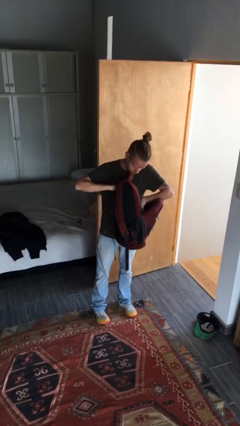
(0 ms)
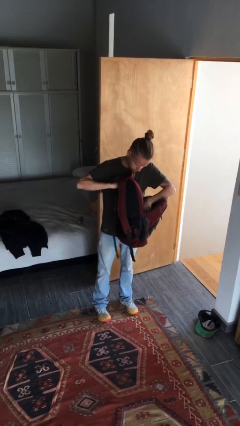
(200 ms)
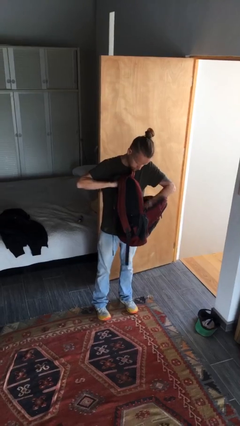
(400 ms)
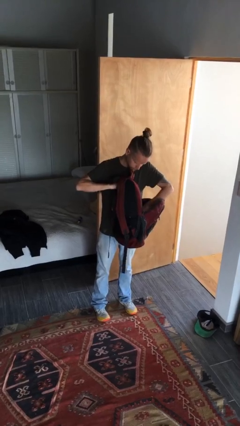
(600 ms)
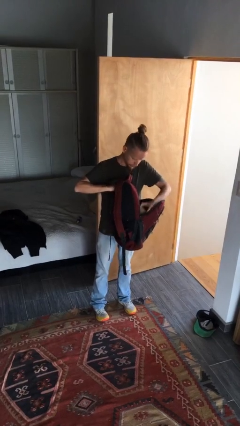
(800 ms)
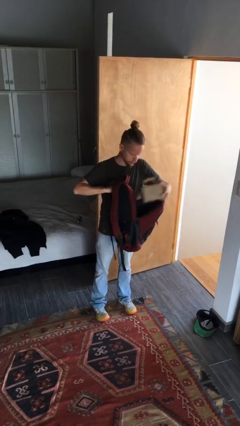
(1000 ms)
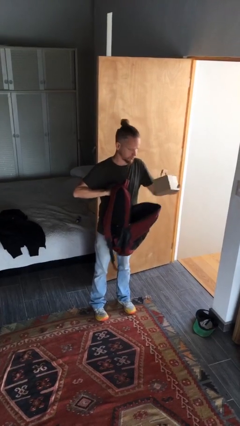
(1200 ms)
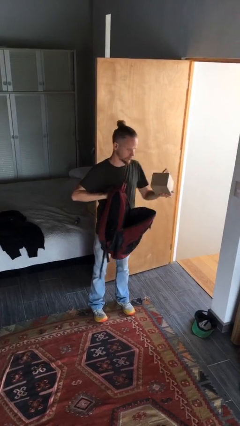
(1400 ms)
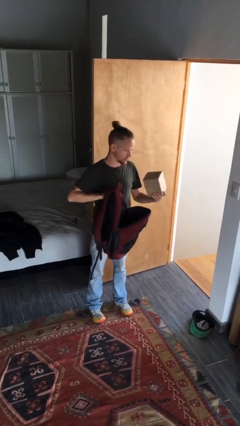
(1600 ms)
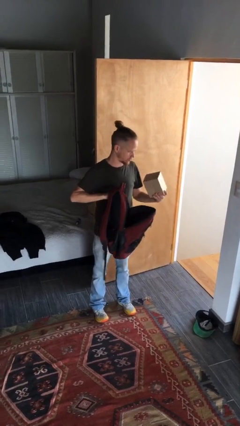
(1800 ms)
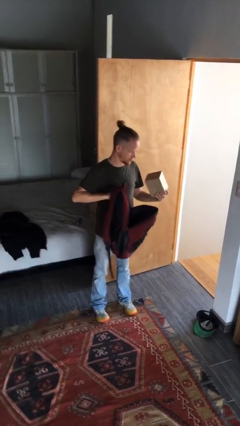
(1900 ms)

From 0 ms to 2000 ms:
person takes object from backpack

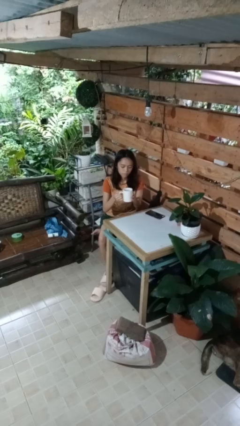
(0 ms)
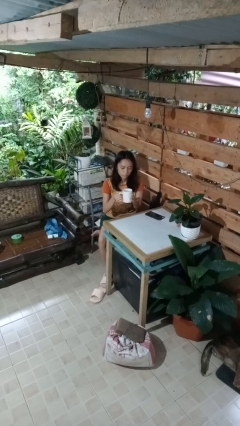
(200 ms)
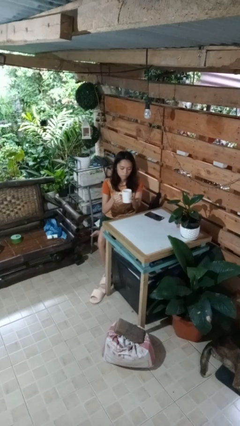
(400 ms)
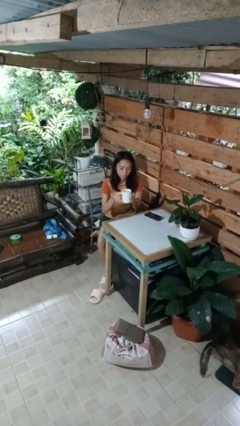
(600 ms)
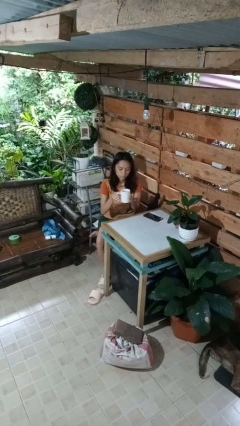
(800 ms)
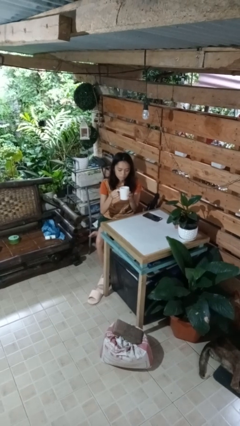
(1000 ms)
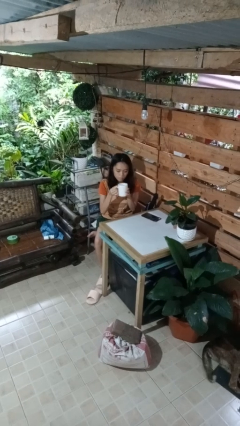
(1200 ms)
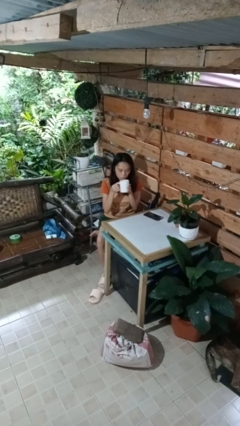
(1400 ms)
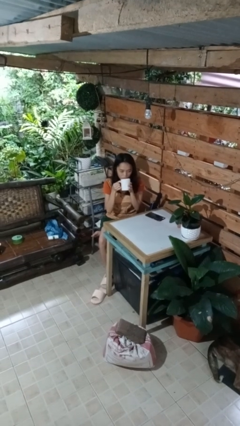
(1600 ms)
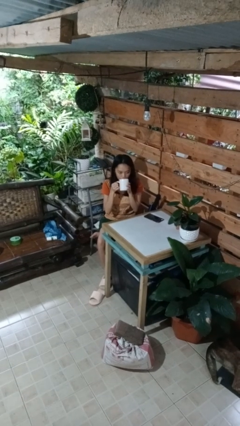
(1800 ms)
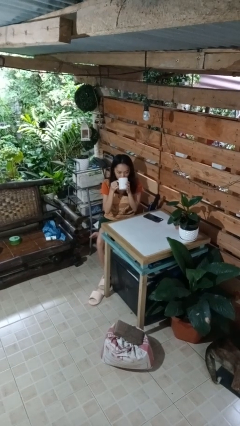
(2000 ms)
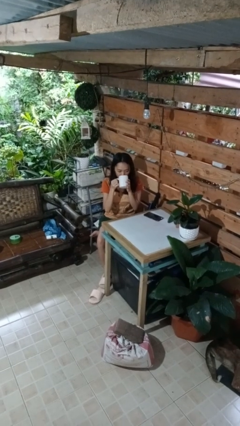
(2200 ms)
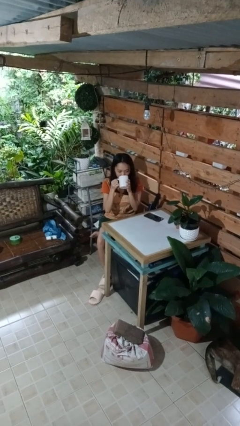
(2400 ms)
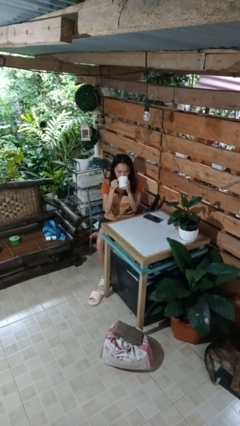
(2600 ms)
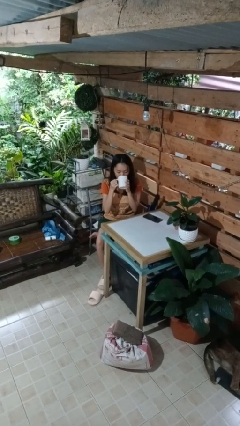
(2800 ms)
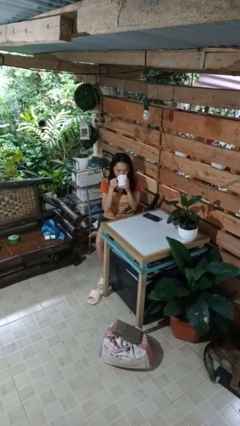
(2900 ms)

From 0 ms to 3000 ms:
person drinks from mug

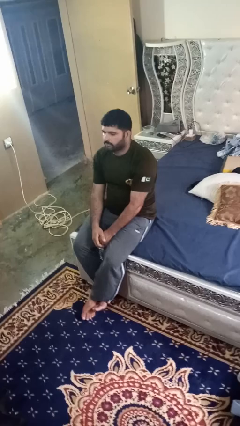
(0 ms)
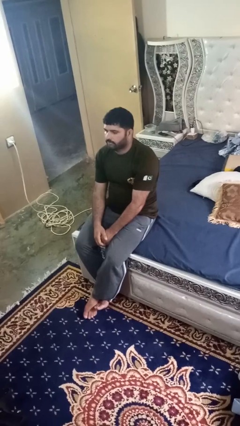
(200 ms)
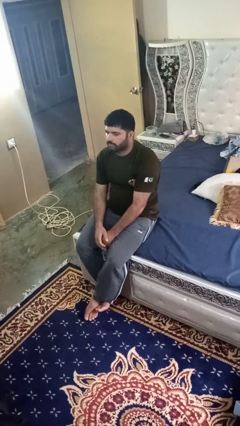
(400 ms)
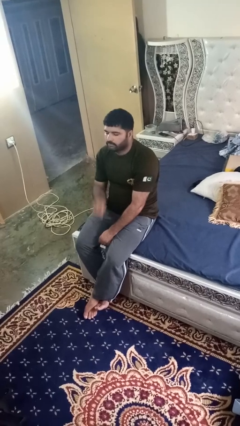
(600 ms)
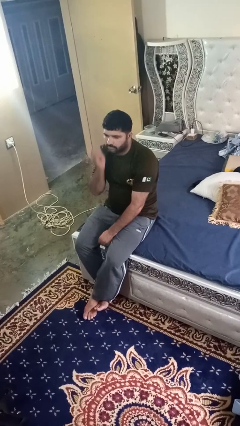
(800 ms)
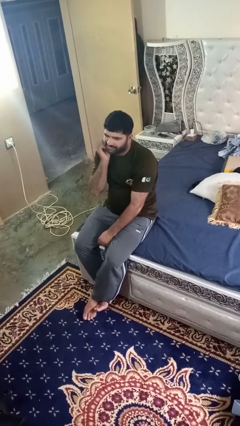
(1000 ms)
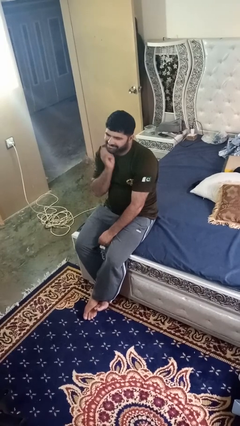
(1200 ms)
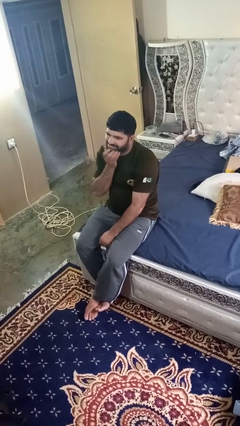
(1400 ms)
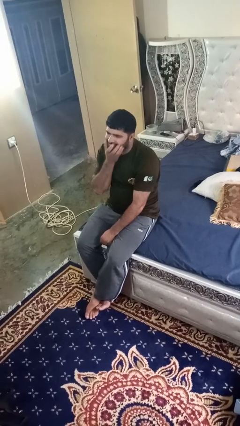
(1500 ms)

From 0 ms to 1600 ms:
person strokes chin

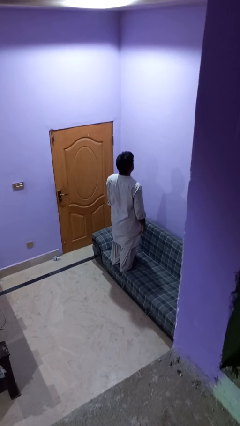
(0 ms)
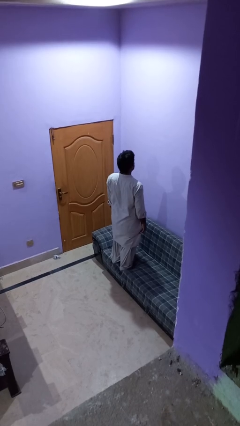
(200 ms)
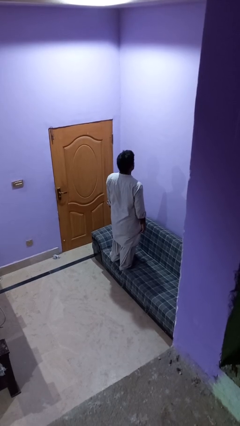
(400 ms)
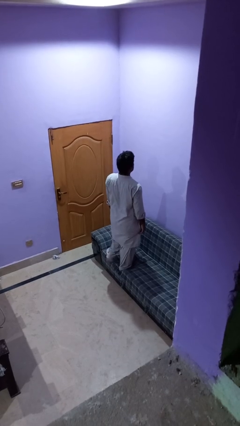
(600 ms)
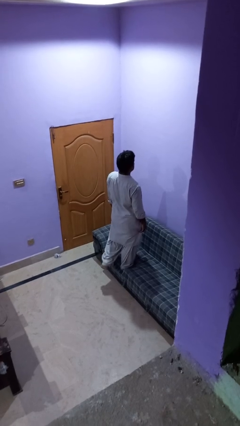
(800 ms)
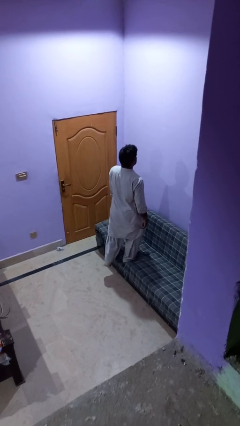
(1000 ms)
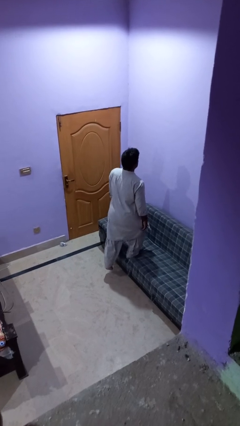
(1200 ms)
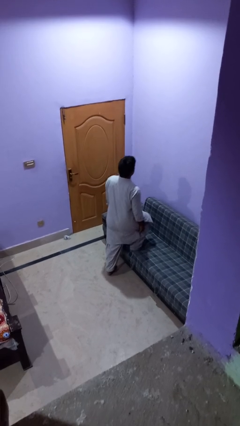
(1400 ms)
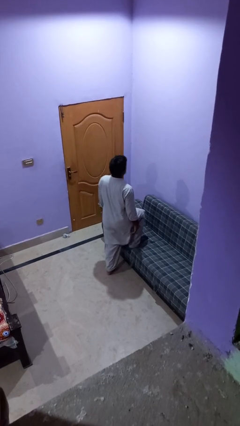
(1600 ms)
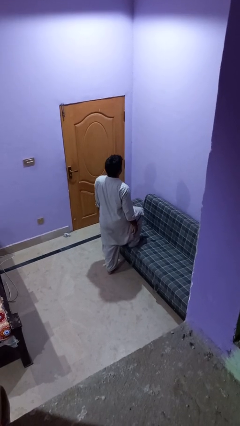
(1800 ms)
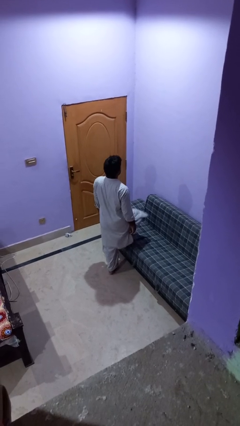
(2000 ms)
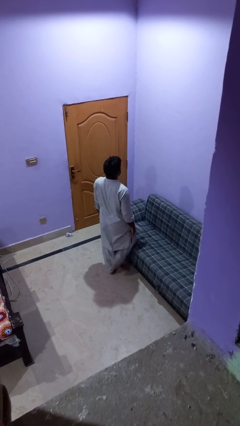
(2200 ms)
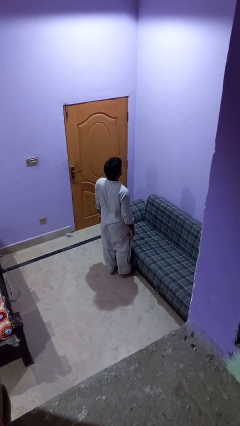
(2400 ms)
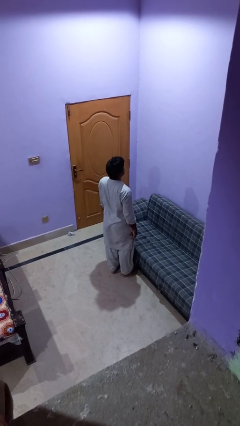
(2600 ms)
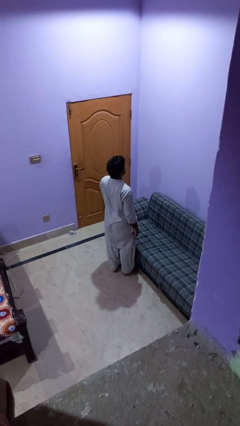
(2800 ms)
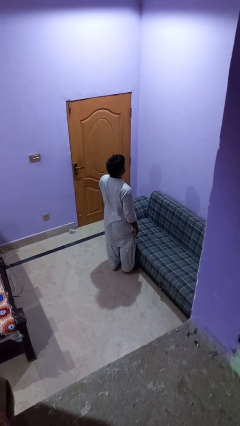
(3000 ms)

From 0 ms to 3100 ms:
person climbs off couch

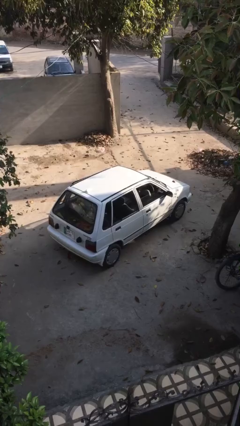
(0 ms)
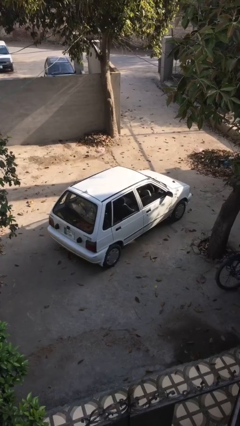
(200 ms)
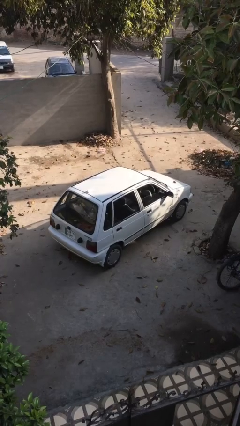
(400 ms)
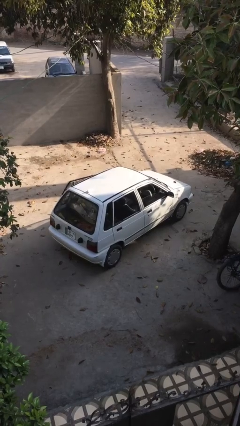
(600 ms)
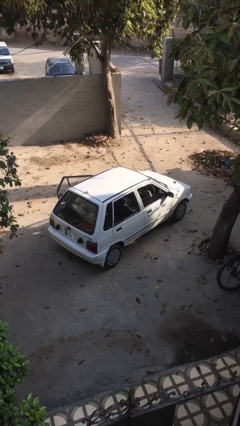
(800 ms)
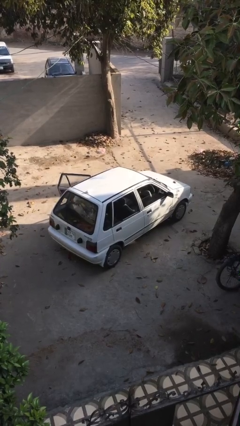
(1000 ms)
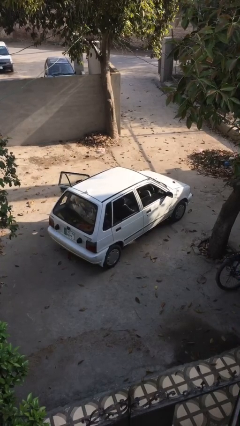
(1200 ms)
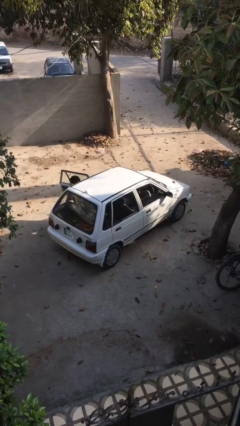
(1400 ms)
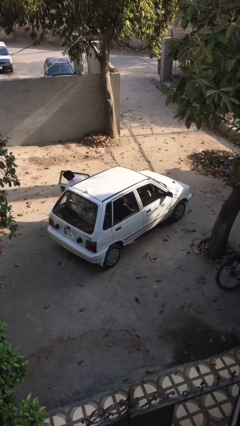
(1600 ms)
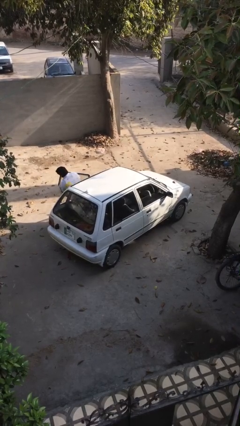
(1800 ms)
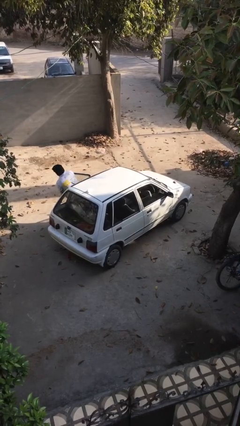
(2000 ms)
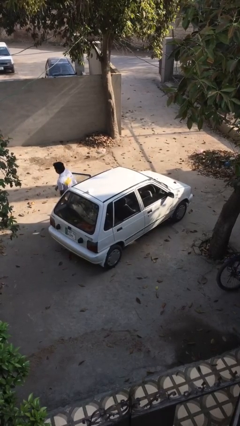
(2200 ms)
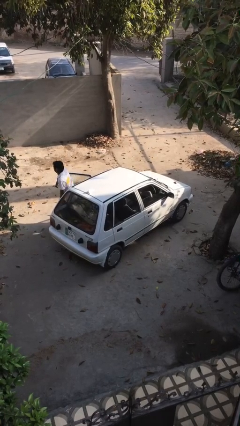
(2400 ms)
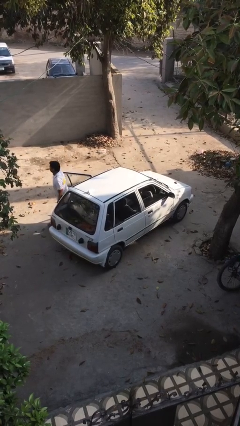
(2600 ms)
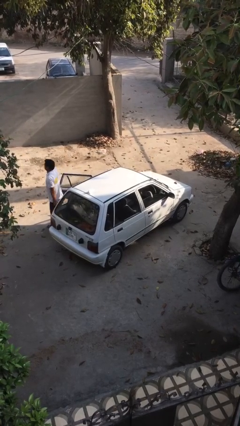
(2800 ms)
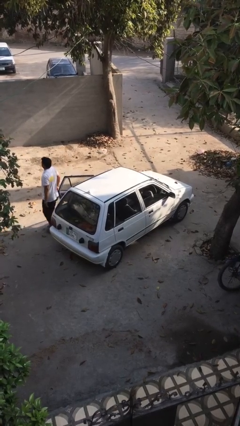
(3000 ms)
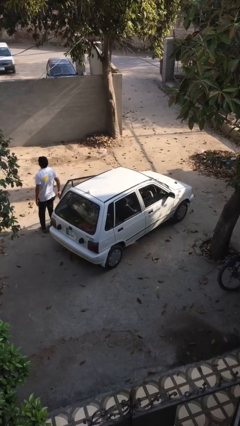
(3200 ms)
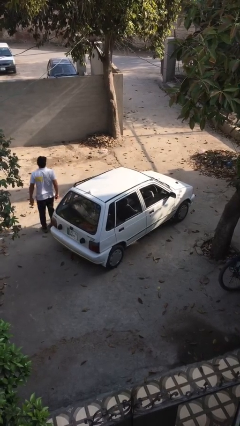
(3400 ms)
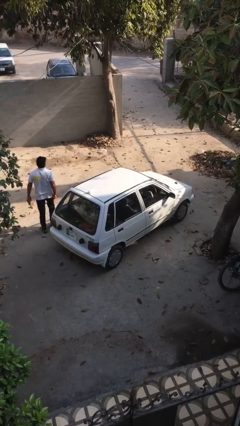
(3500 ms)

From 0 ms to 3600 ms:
car drops off person

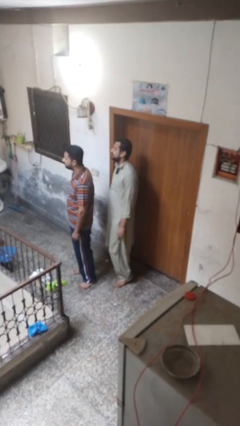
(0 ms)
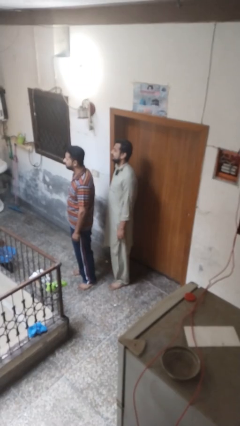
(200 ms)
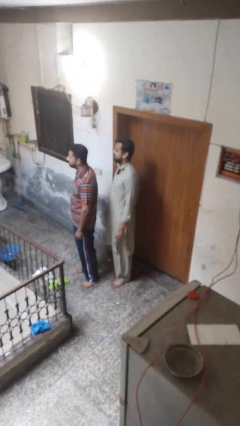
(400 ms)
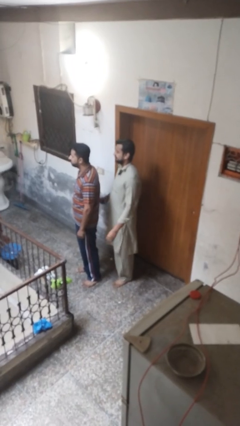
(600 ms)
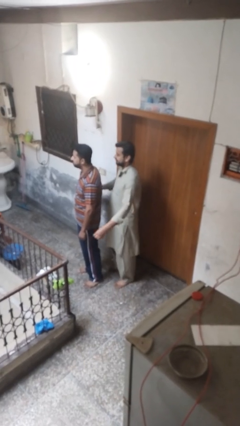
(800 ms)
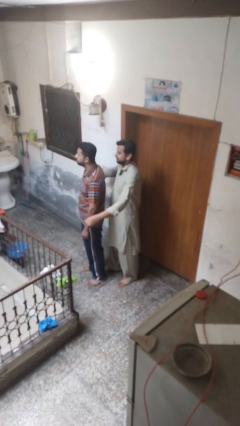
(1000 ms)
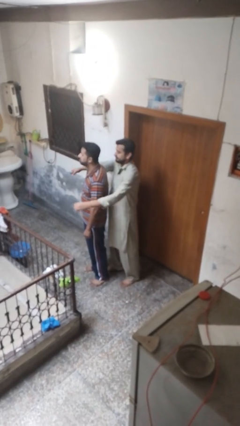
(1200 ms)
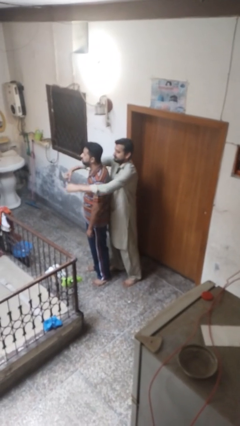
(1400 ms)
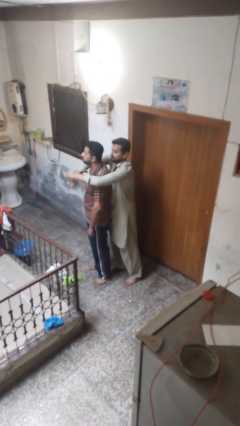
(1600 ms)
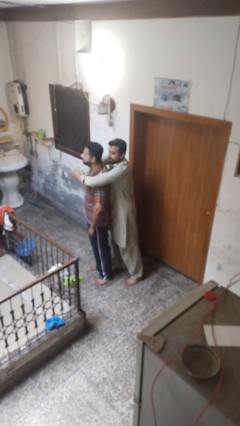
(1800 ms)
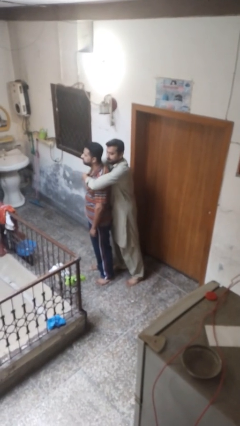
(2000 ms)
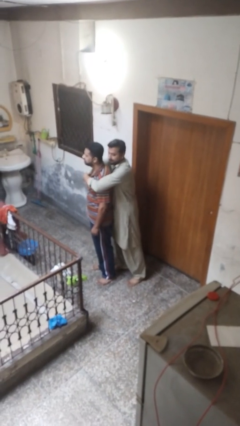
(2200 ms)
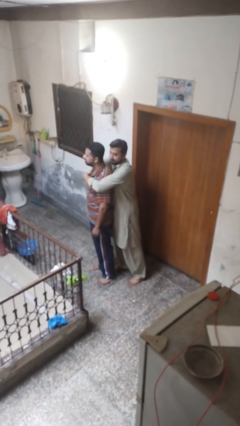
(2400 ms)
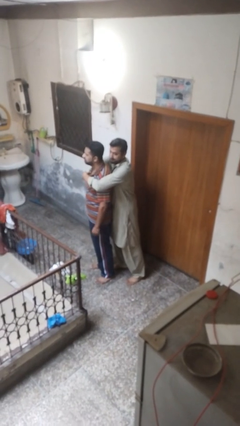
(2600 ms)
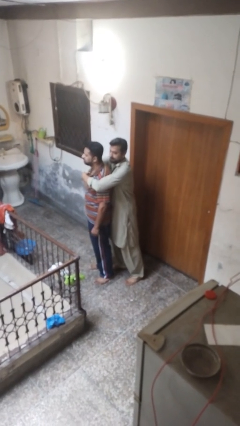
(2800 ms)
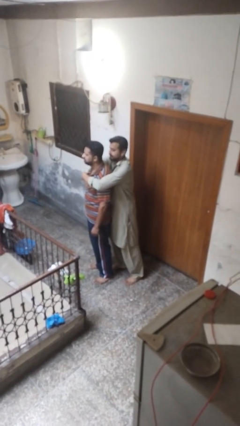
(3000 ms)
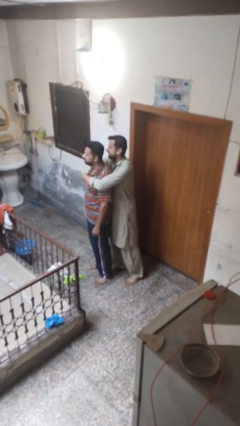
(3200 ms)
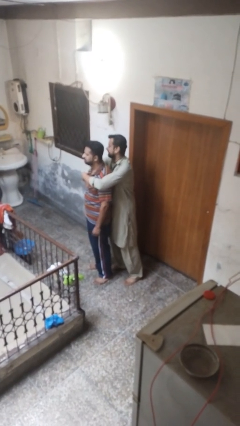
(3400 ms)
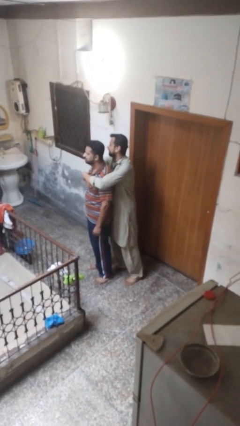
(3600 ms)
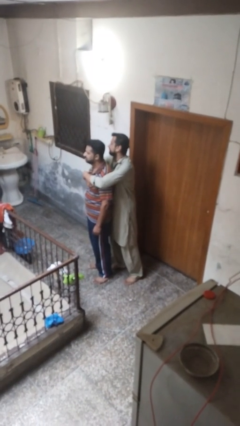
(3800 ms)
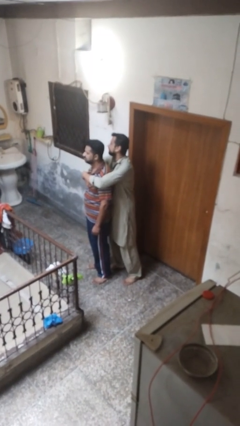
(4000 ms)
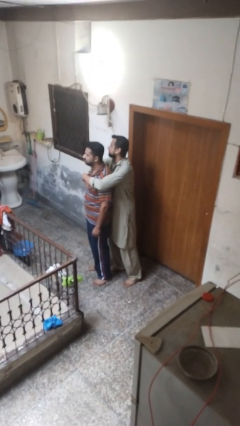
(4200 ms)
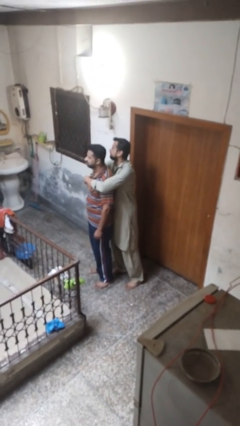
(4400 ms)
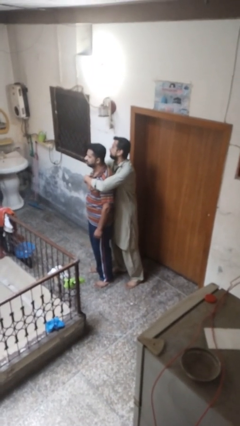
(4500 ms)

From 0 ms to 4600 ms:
person hugs person from behind
